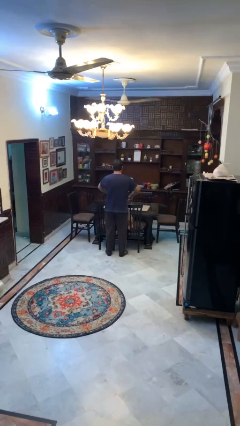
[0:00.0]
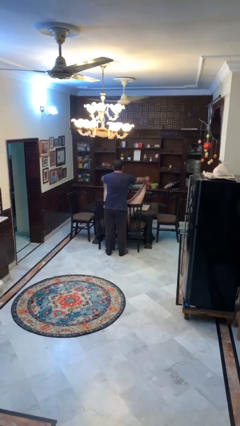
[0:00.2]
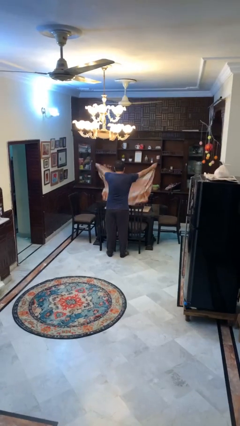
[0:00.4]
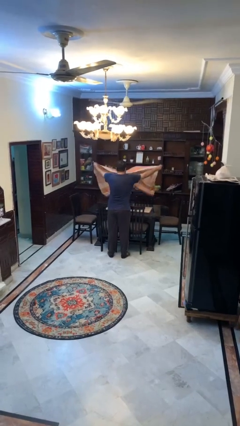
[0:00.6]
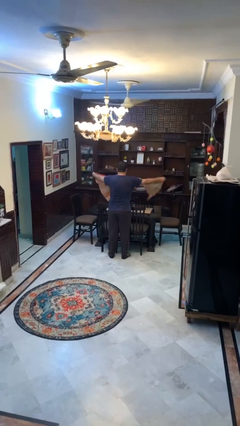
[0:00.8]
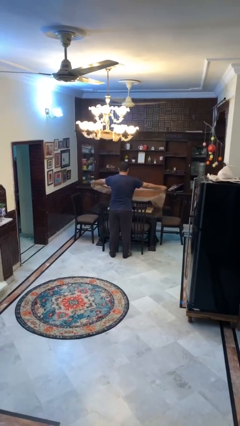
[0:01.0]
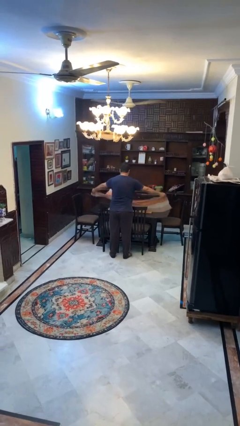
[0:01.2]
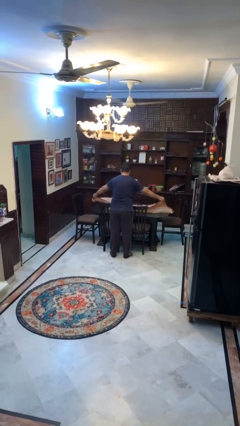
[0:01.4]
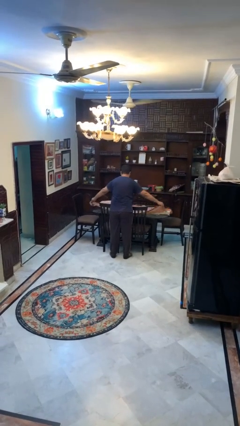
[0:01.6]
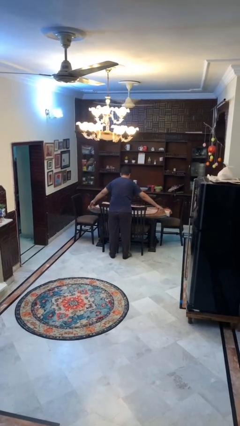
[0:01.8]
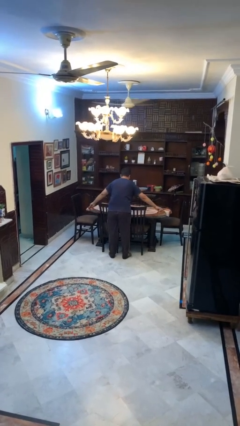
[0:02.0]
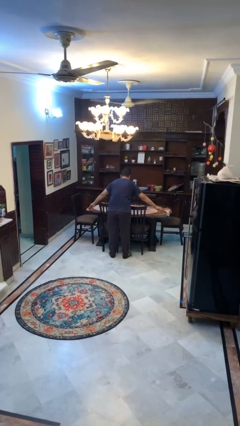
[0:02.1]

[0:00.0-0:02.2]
person spreads tablecloth

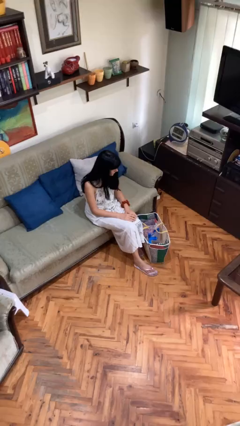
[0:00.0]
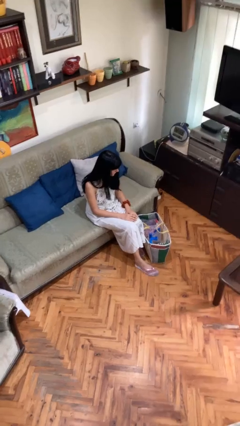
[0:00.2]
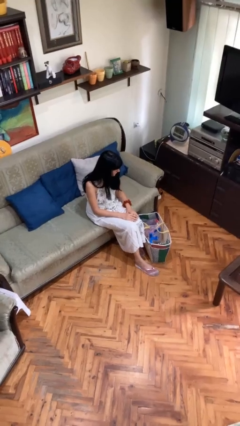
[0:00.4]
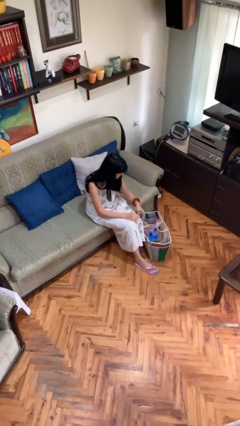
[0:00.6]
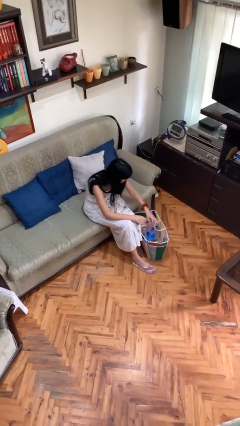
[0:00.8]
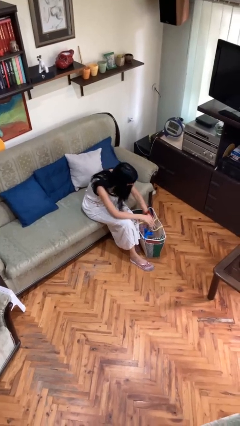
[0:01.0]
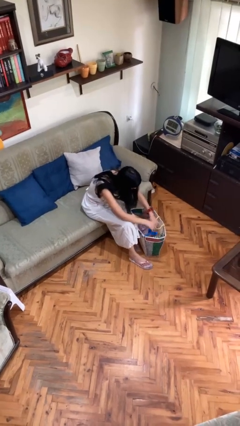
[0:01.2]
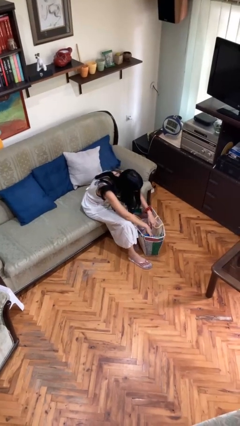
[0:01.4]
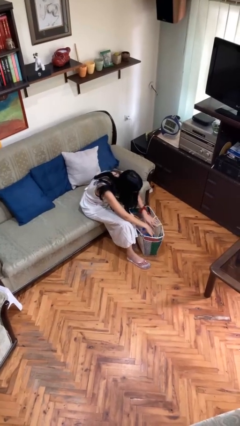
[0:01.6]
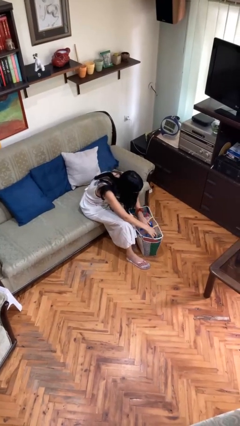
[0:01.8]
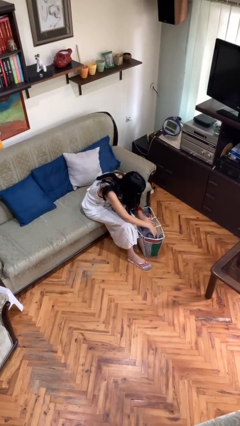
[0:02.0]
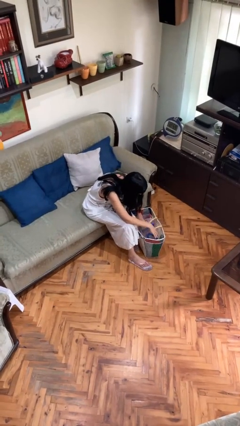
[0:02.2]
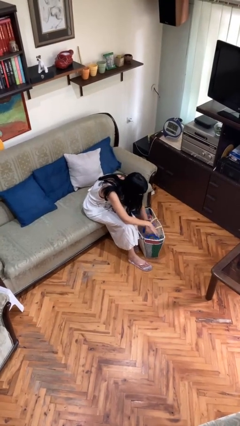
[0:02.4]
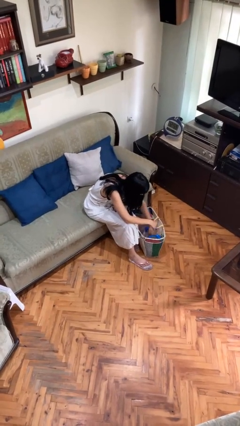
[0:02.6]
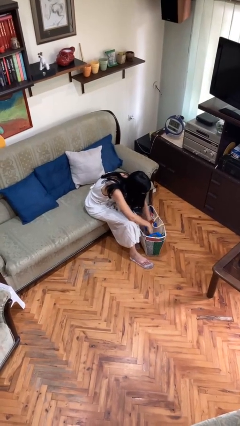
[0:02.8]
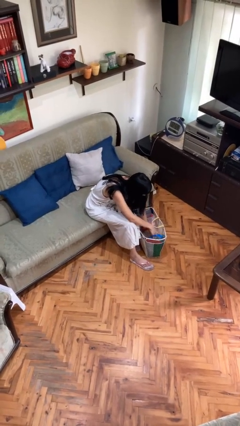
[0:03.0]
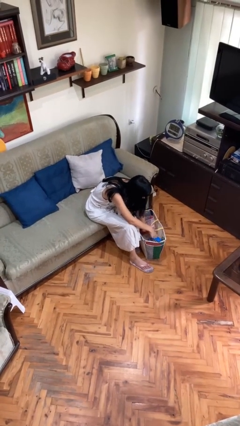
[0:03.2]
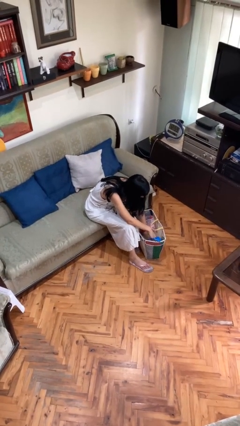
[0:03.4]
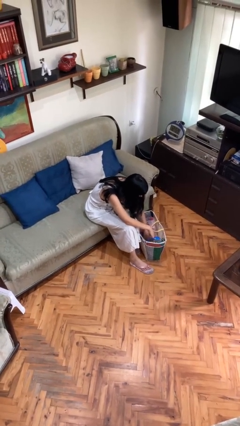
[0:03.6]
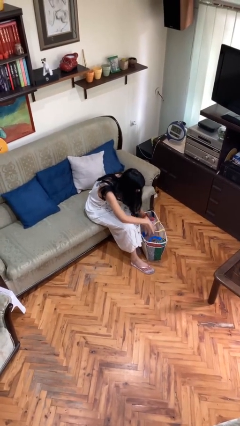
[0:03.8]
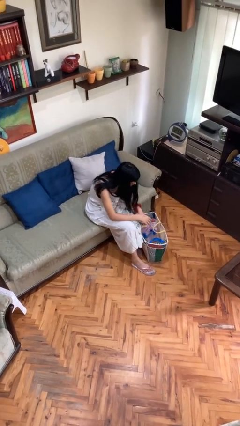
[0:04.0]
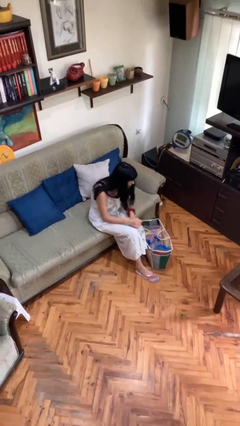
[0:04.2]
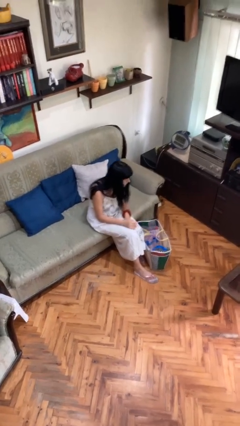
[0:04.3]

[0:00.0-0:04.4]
person searches in bag

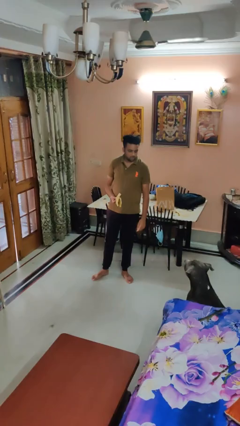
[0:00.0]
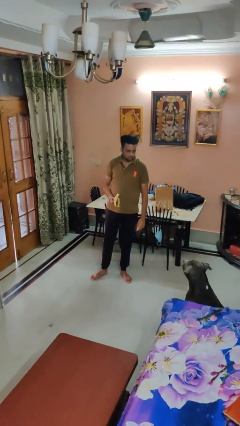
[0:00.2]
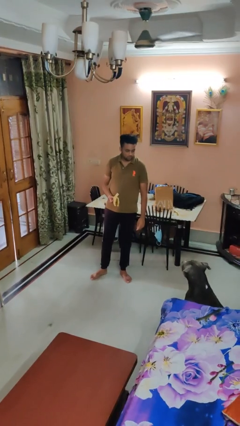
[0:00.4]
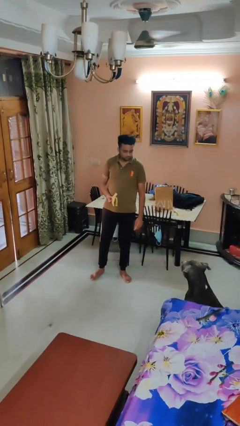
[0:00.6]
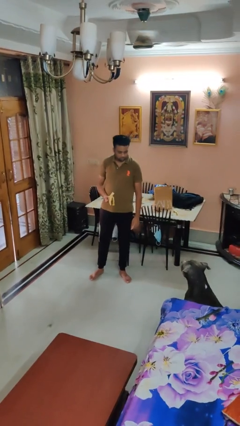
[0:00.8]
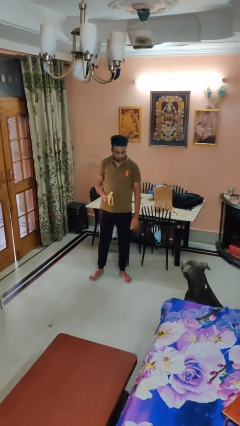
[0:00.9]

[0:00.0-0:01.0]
person eats banana

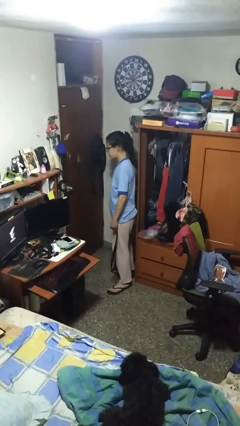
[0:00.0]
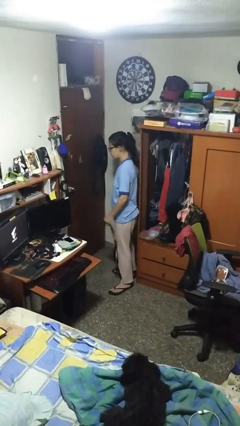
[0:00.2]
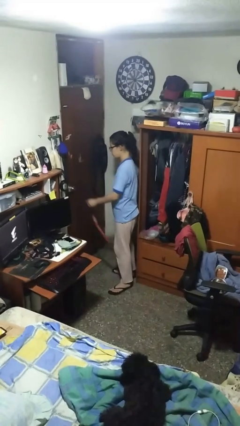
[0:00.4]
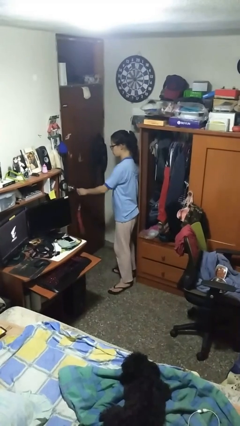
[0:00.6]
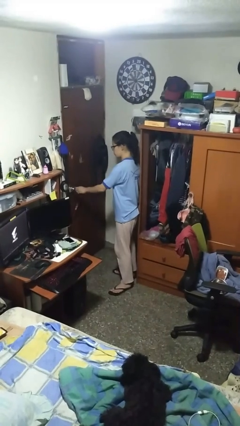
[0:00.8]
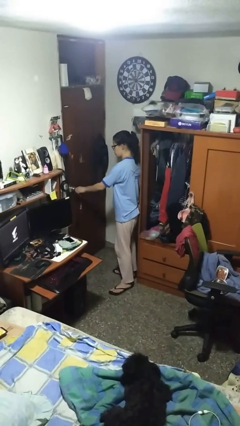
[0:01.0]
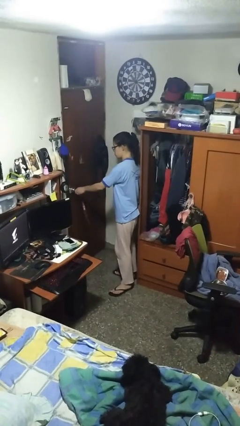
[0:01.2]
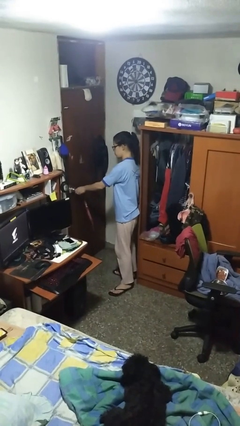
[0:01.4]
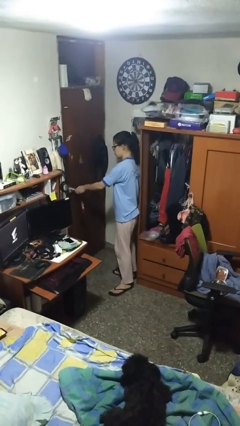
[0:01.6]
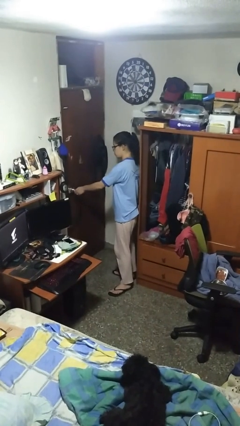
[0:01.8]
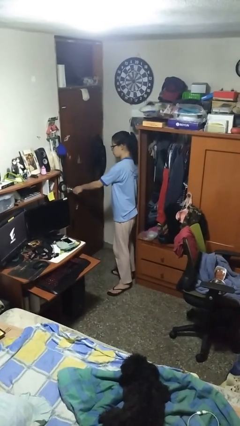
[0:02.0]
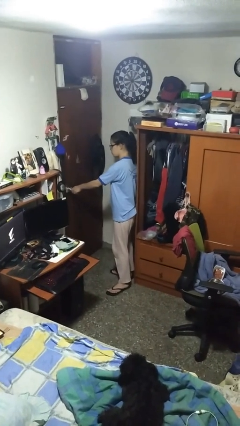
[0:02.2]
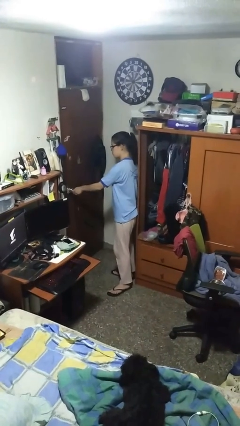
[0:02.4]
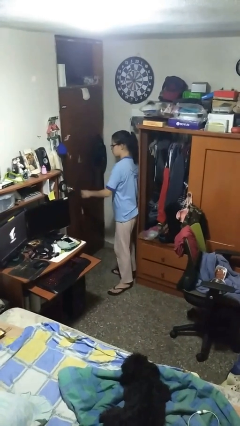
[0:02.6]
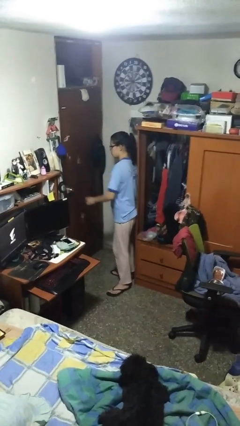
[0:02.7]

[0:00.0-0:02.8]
person locks door with keys

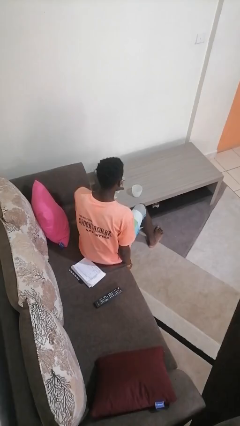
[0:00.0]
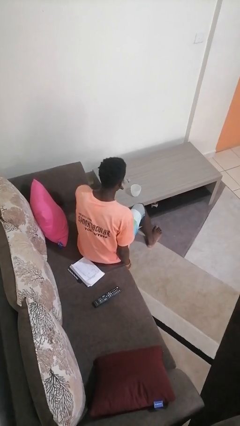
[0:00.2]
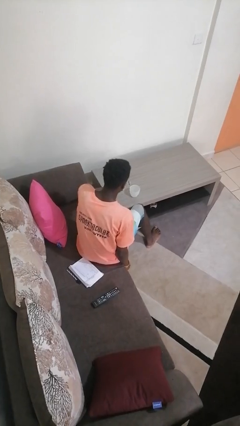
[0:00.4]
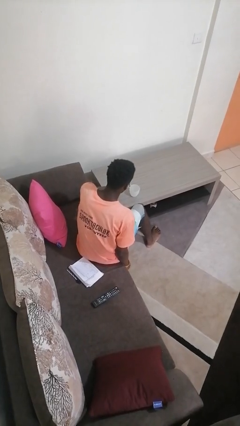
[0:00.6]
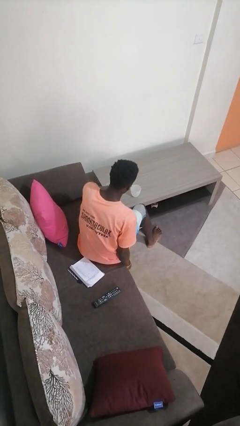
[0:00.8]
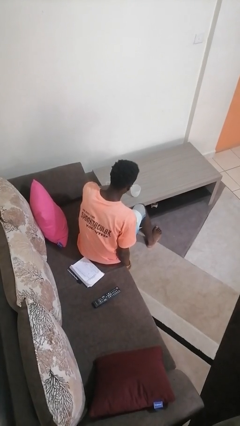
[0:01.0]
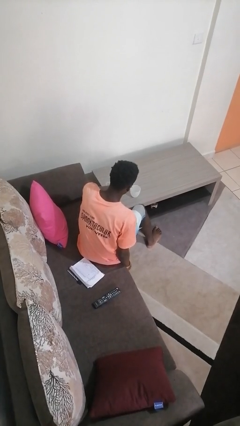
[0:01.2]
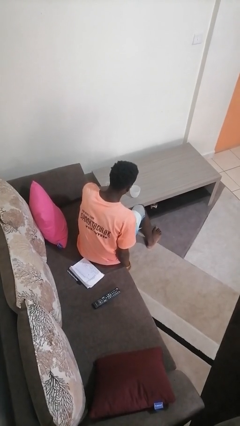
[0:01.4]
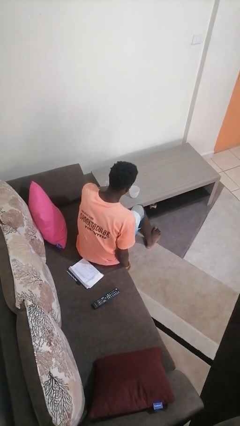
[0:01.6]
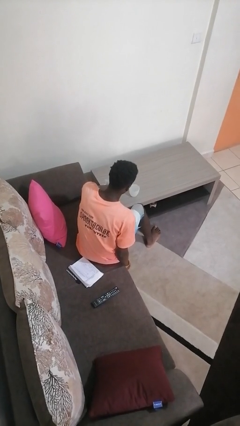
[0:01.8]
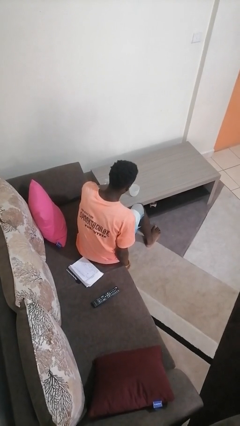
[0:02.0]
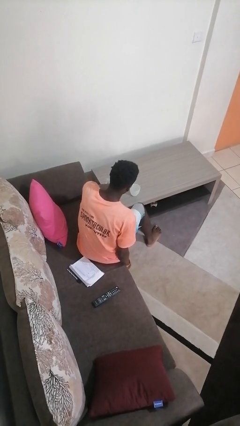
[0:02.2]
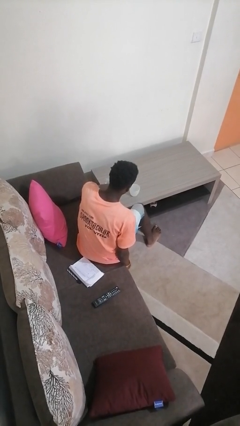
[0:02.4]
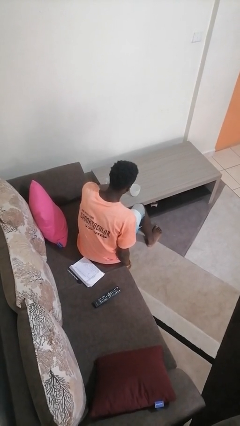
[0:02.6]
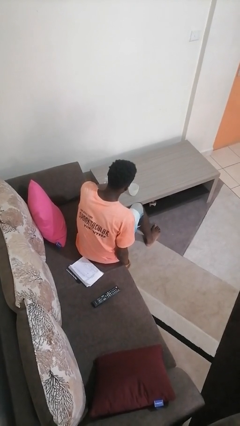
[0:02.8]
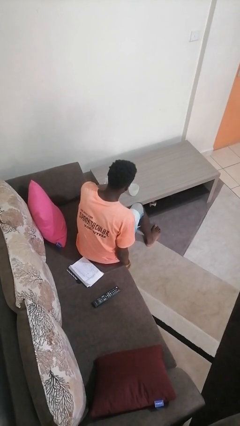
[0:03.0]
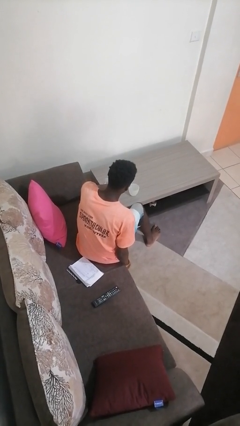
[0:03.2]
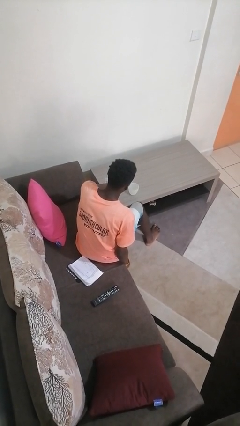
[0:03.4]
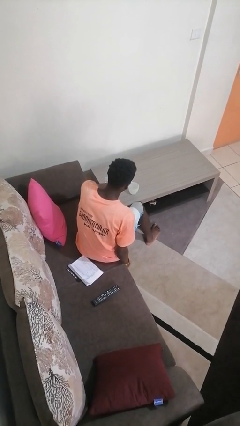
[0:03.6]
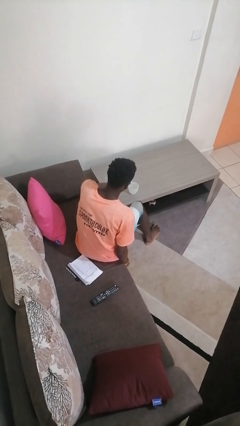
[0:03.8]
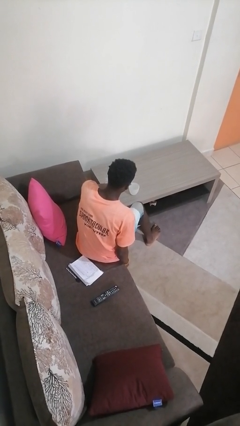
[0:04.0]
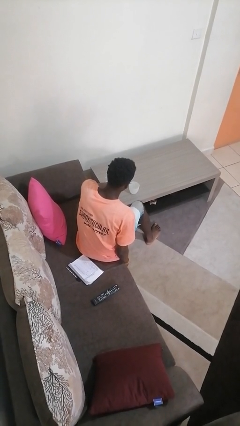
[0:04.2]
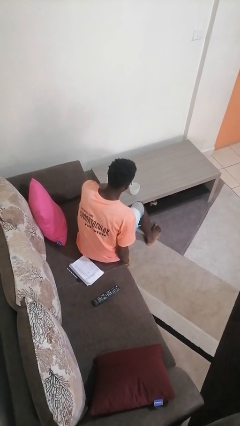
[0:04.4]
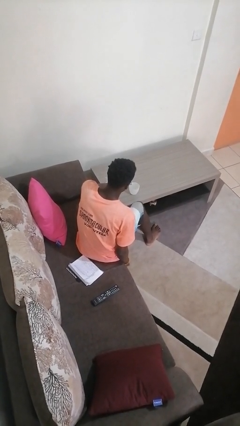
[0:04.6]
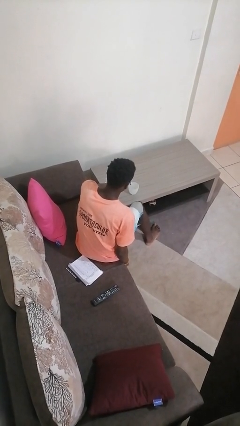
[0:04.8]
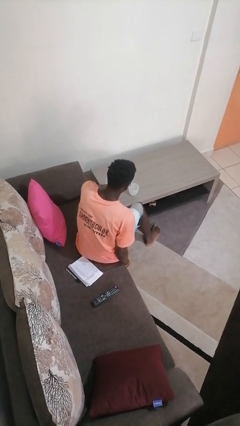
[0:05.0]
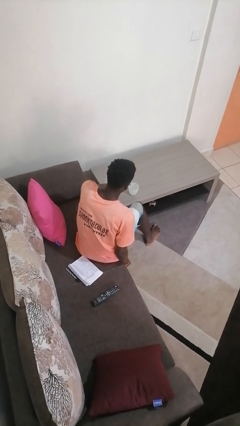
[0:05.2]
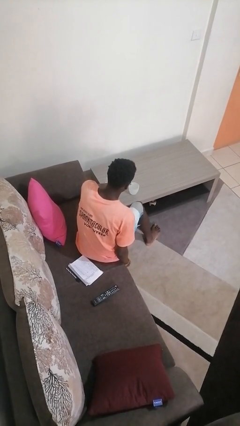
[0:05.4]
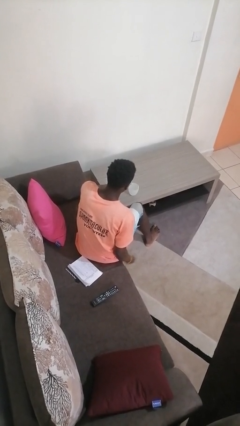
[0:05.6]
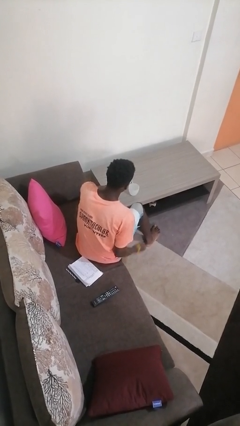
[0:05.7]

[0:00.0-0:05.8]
person pours liquid into cup

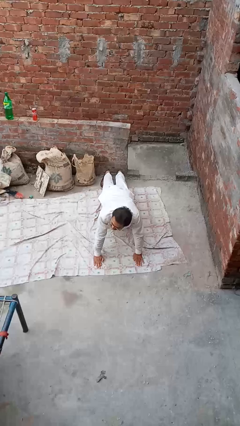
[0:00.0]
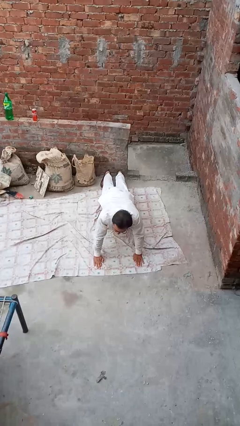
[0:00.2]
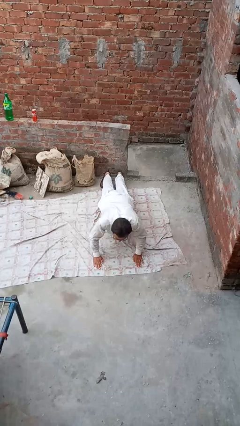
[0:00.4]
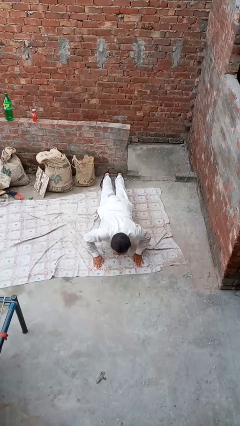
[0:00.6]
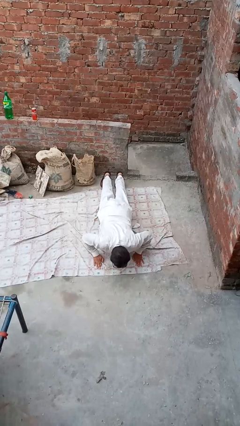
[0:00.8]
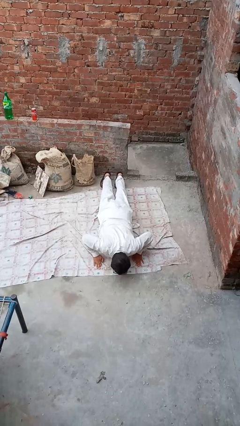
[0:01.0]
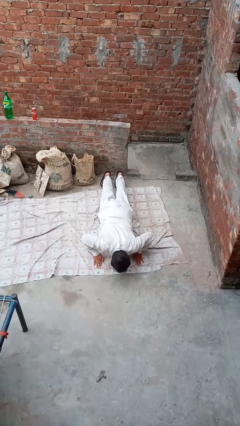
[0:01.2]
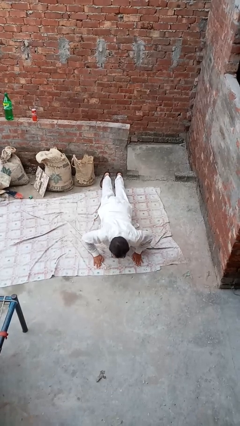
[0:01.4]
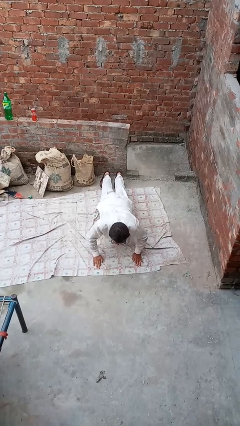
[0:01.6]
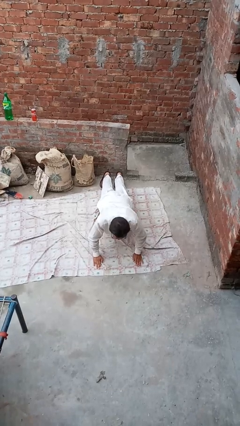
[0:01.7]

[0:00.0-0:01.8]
person exercises with situp
